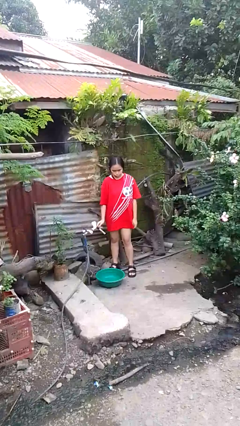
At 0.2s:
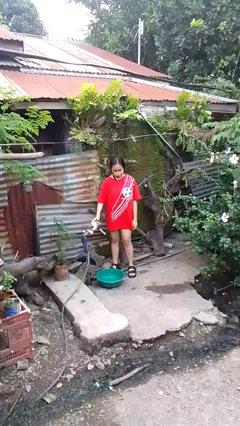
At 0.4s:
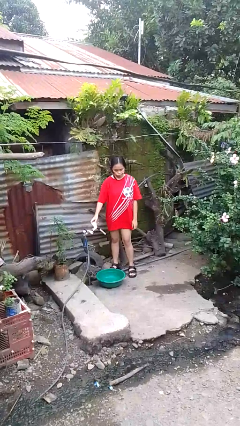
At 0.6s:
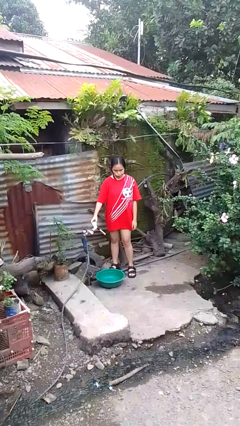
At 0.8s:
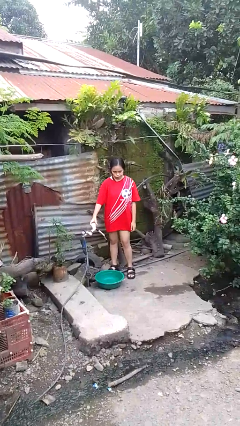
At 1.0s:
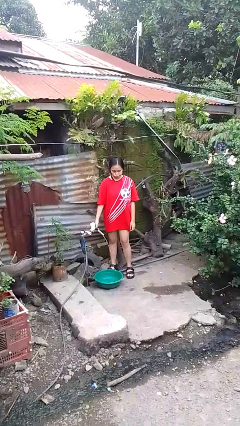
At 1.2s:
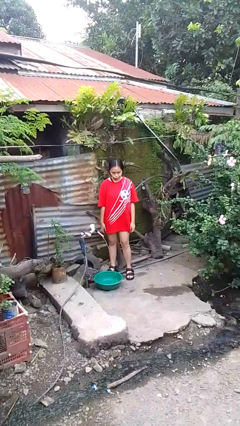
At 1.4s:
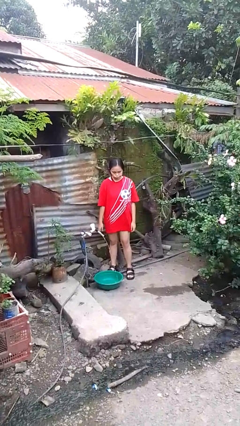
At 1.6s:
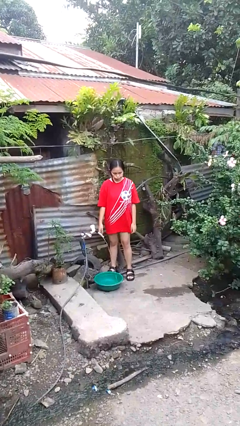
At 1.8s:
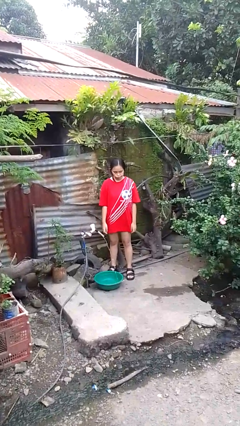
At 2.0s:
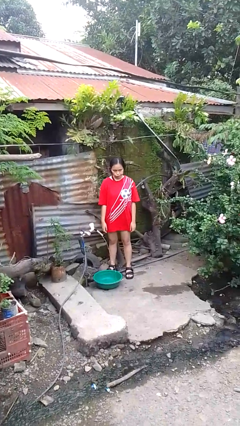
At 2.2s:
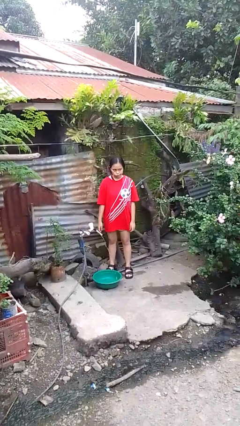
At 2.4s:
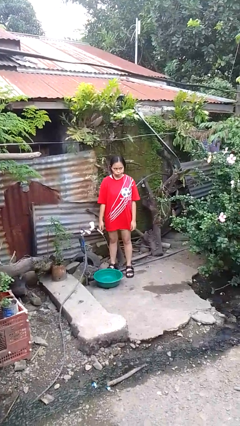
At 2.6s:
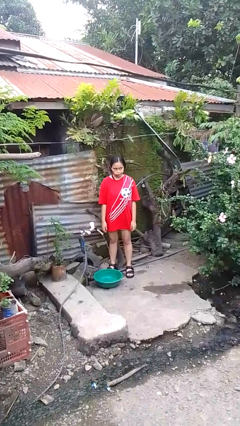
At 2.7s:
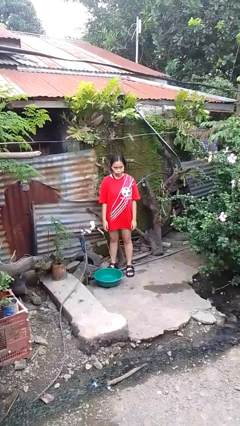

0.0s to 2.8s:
person turns on faucet

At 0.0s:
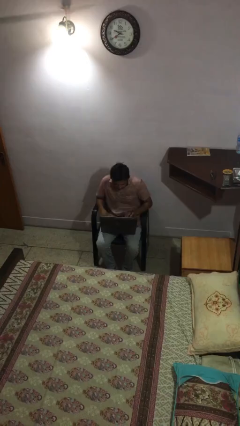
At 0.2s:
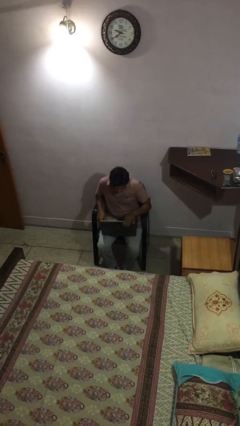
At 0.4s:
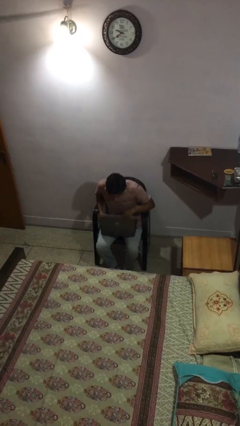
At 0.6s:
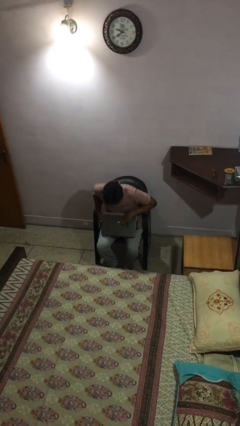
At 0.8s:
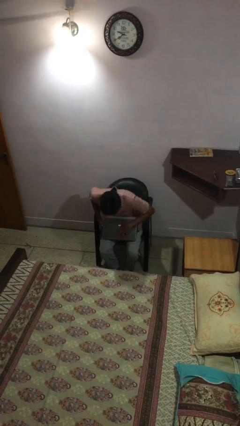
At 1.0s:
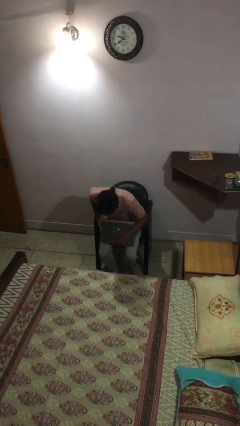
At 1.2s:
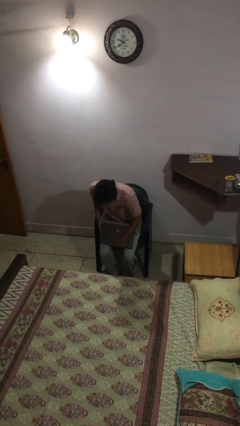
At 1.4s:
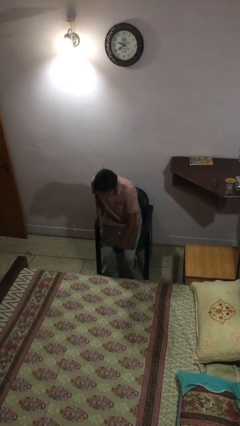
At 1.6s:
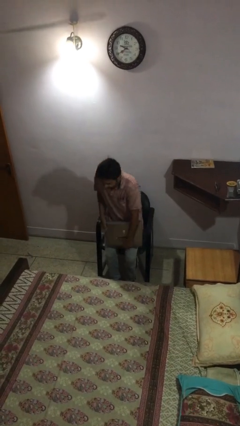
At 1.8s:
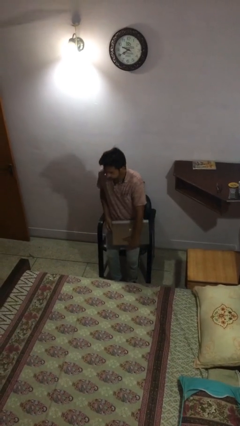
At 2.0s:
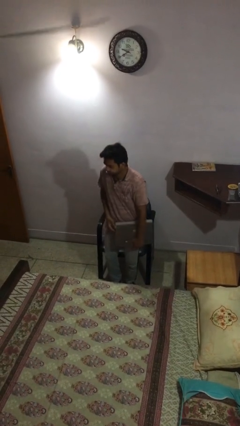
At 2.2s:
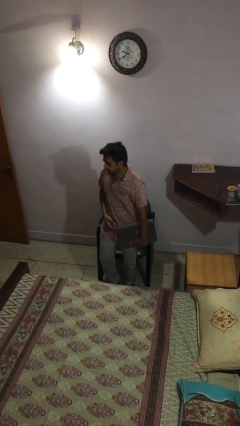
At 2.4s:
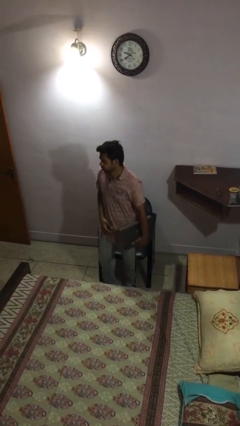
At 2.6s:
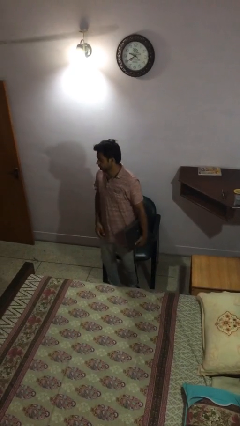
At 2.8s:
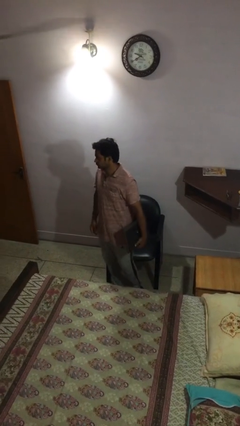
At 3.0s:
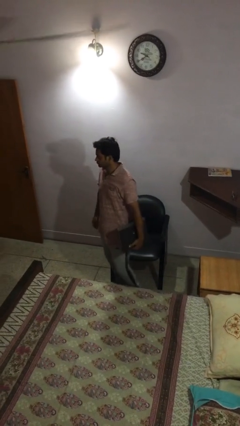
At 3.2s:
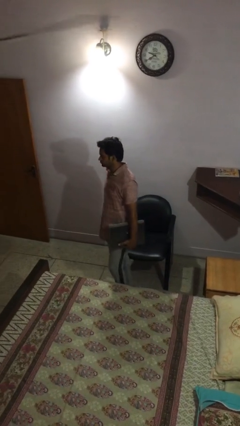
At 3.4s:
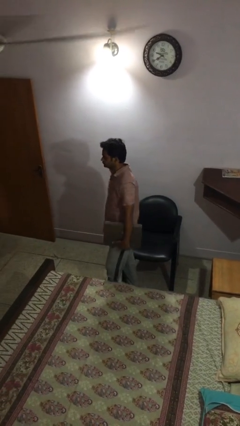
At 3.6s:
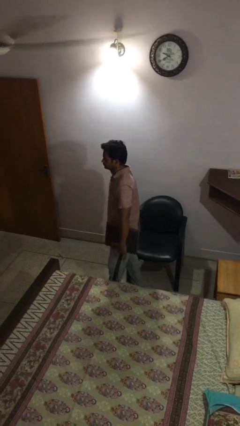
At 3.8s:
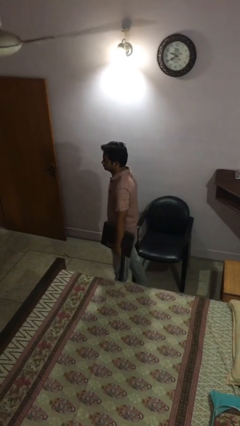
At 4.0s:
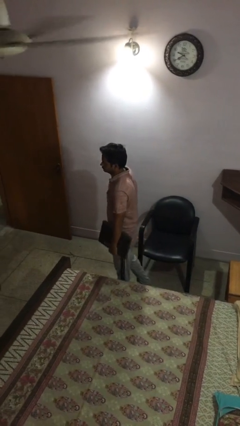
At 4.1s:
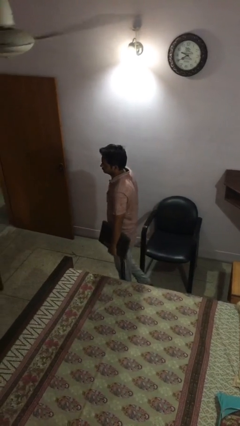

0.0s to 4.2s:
person stands up

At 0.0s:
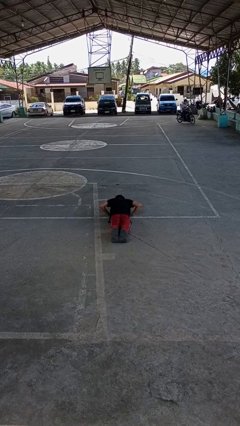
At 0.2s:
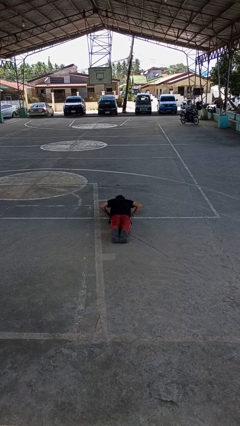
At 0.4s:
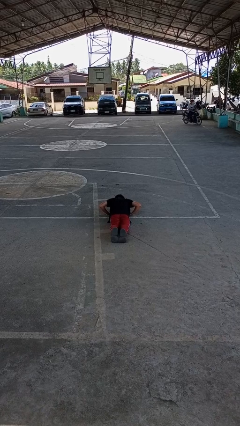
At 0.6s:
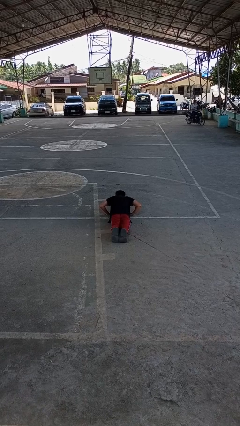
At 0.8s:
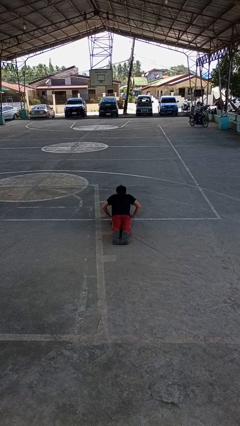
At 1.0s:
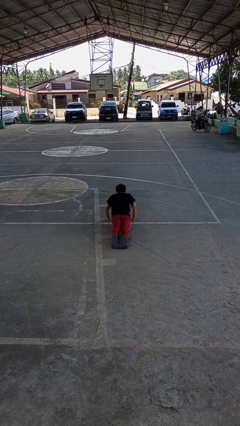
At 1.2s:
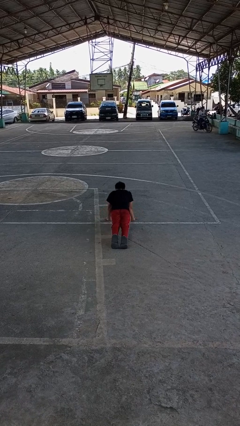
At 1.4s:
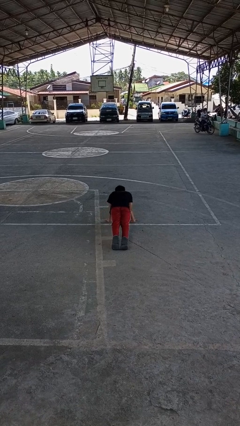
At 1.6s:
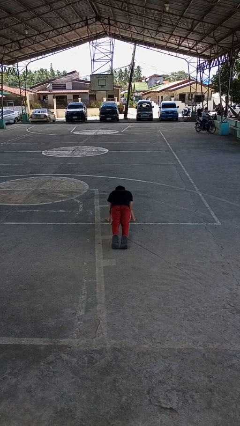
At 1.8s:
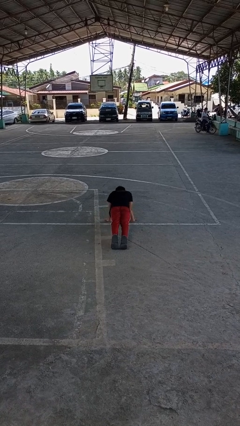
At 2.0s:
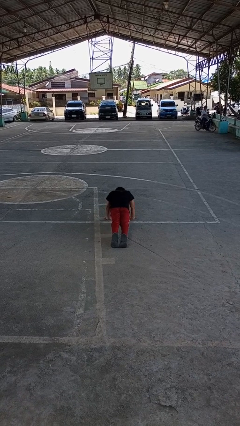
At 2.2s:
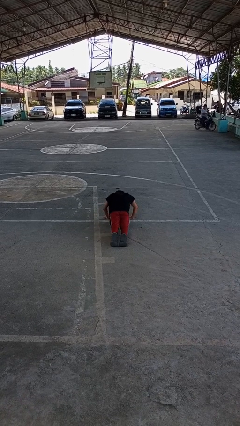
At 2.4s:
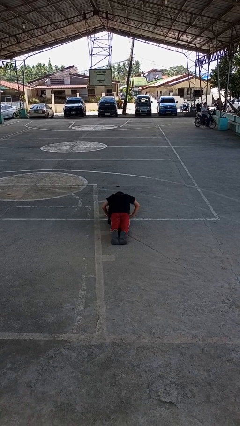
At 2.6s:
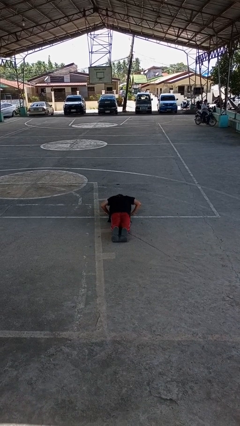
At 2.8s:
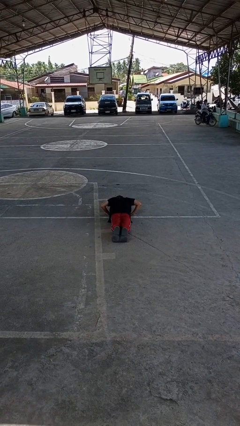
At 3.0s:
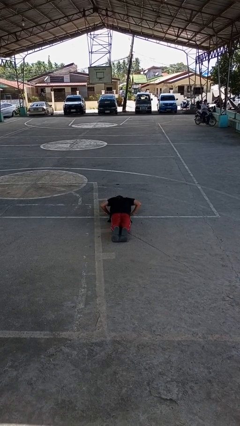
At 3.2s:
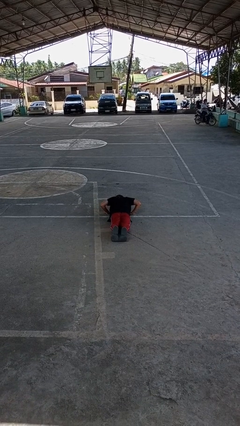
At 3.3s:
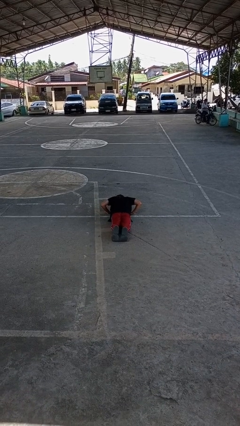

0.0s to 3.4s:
person exercises with pushup

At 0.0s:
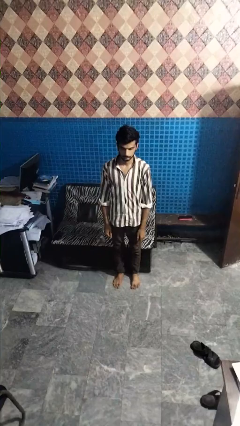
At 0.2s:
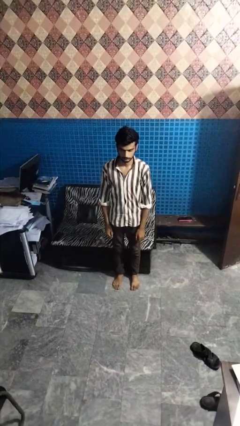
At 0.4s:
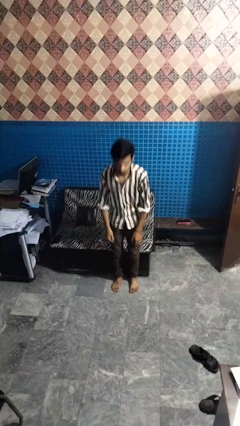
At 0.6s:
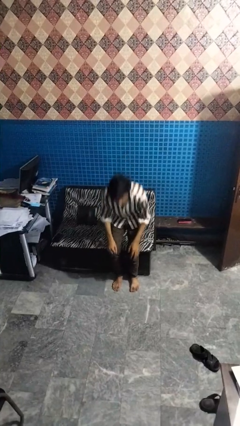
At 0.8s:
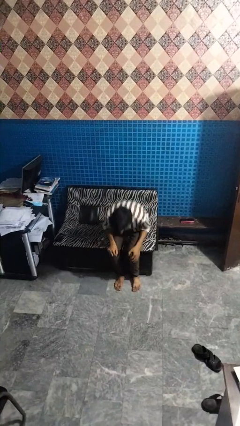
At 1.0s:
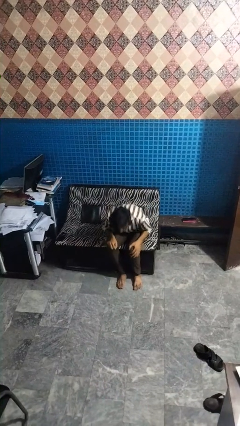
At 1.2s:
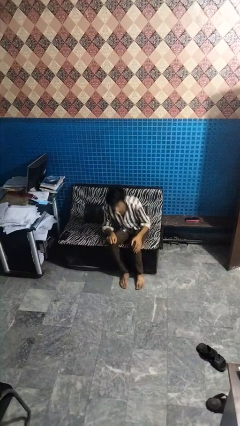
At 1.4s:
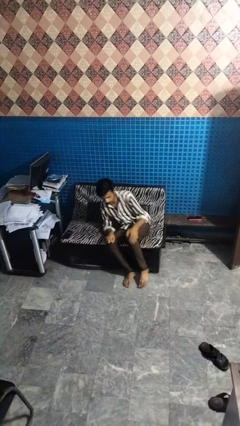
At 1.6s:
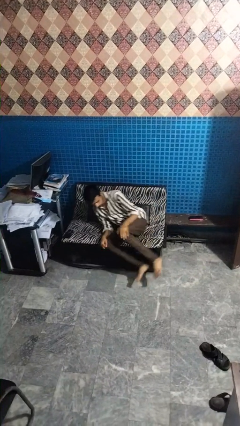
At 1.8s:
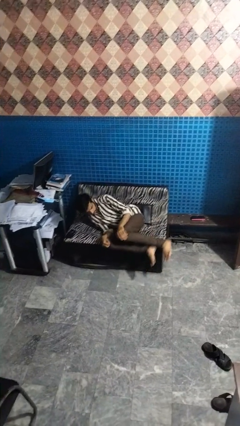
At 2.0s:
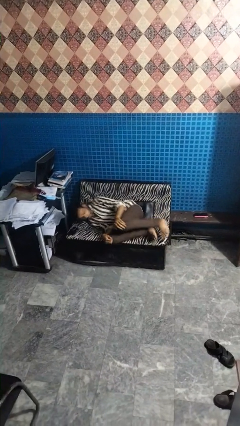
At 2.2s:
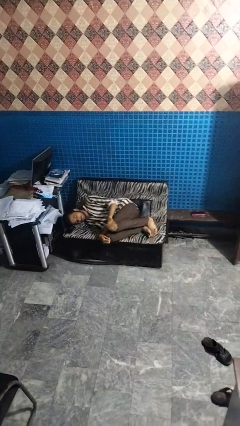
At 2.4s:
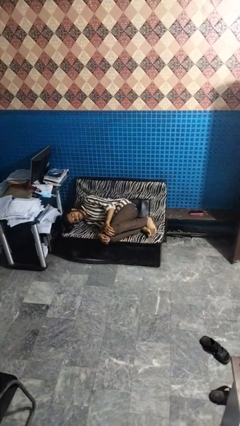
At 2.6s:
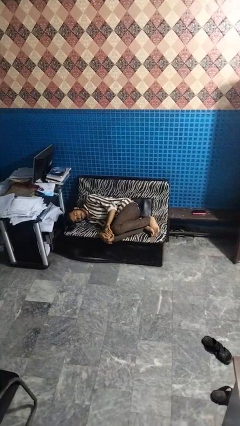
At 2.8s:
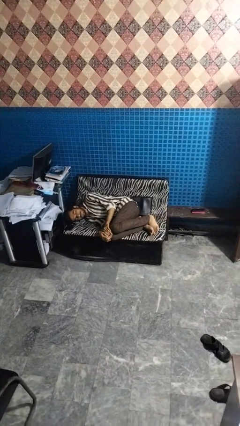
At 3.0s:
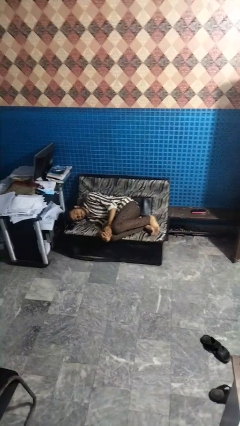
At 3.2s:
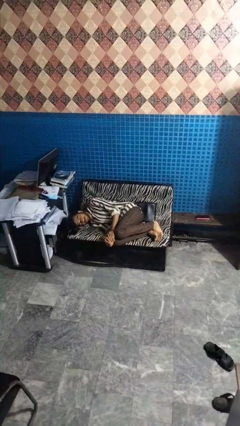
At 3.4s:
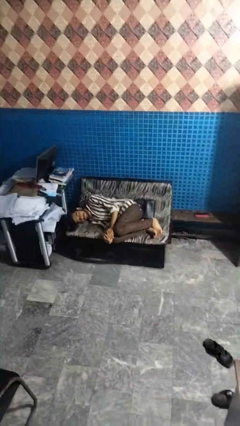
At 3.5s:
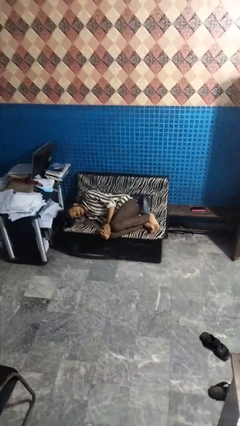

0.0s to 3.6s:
person lies down on couch

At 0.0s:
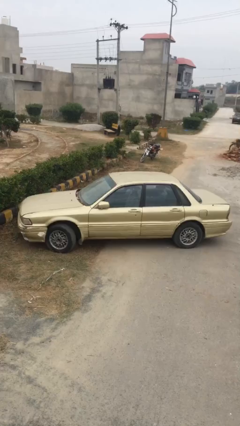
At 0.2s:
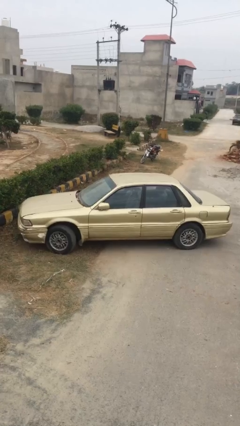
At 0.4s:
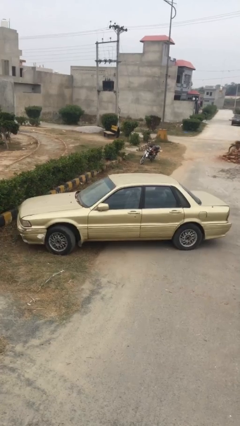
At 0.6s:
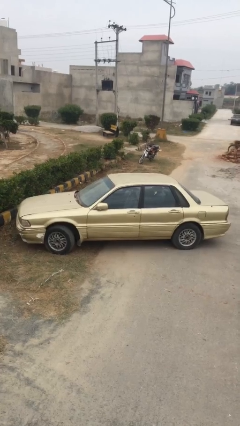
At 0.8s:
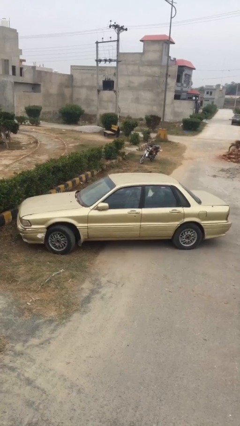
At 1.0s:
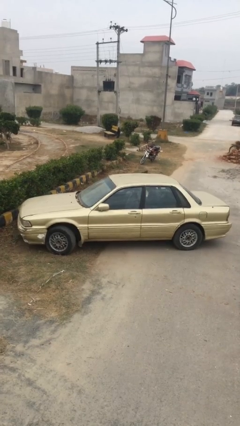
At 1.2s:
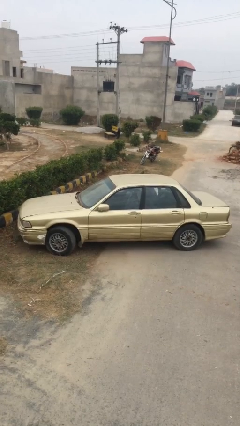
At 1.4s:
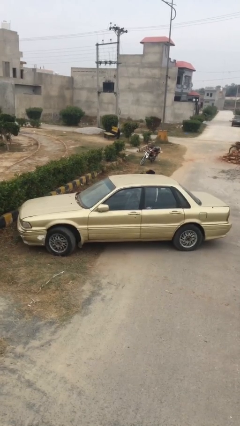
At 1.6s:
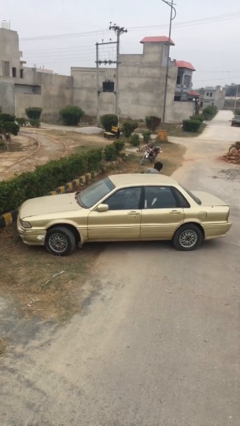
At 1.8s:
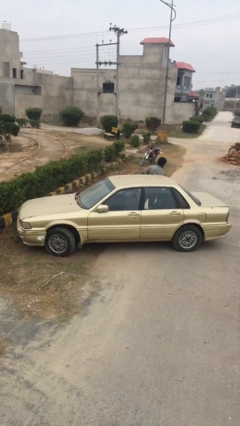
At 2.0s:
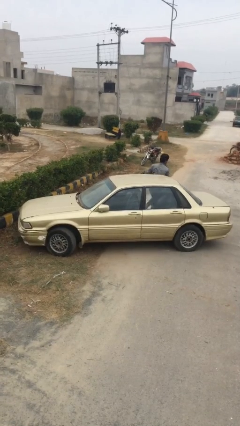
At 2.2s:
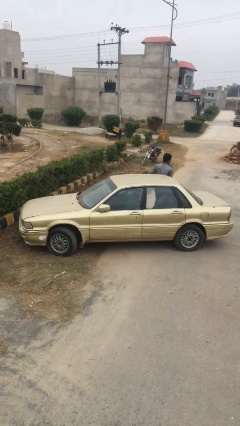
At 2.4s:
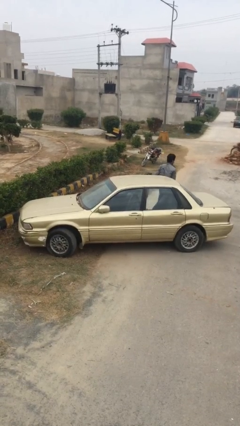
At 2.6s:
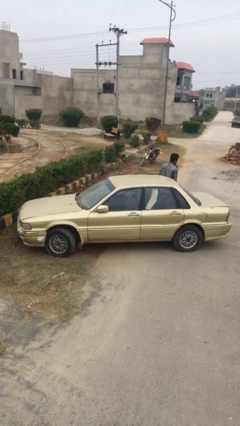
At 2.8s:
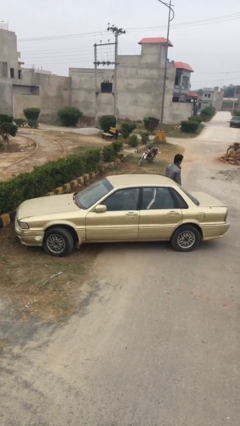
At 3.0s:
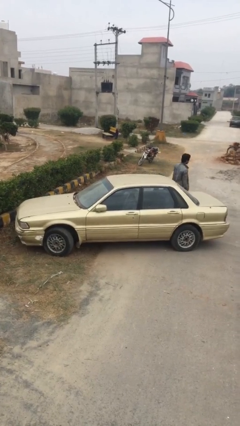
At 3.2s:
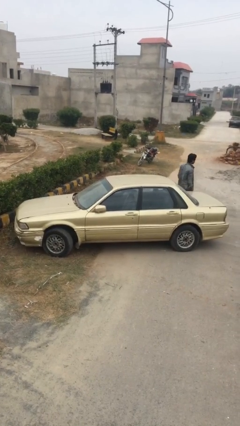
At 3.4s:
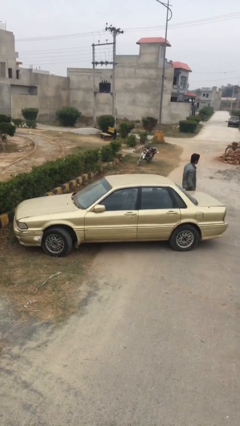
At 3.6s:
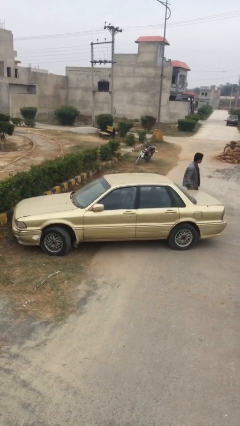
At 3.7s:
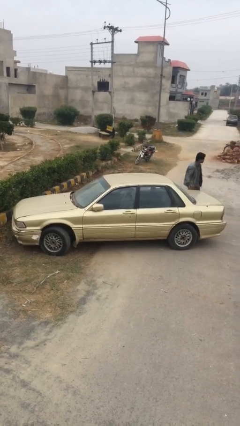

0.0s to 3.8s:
car drops off person
